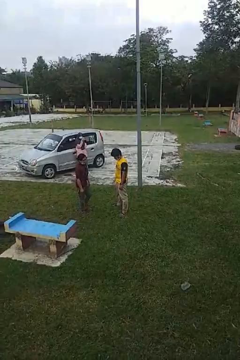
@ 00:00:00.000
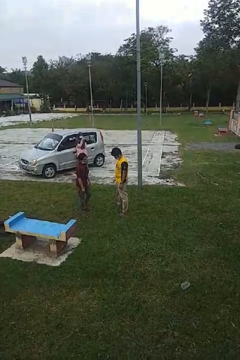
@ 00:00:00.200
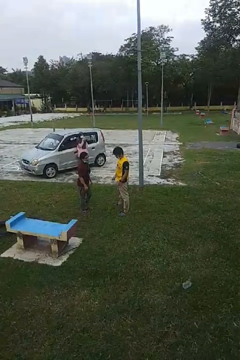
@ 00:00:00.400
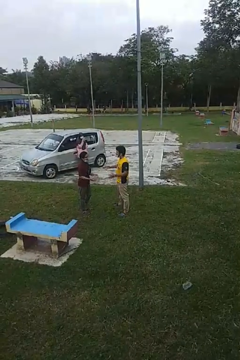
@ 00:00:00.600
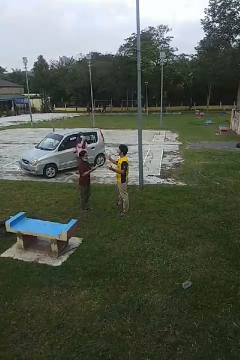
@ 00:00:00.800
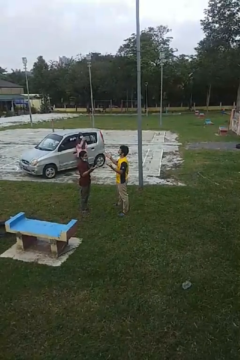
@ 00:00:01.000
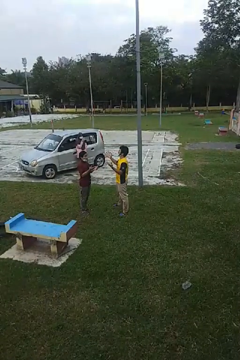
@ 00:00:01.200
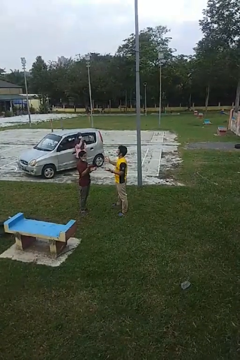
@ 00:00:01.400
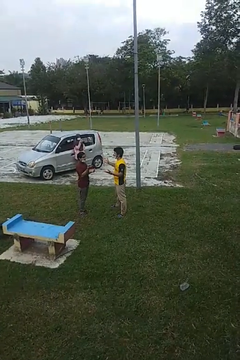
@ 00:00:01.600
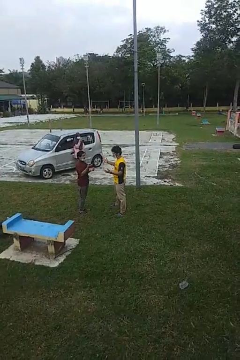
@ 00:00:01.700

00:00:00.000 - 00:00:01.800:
person talks to person

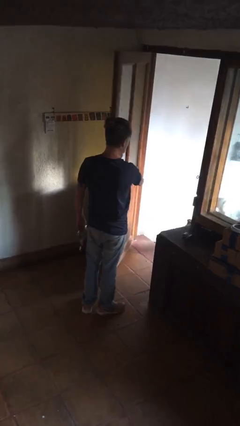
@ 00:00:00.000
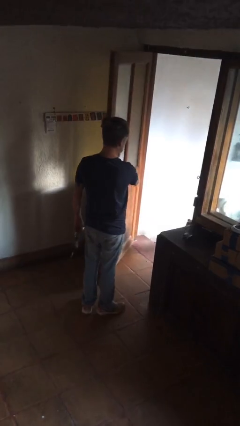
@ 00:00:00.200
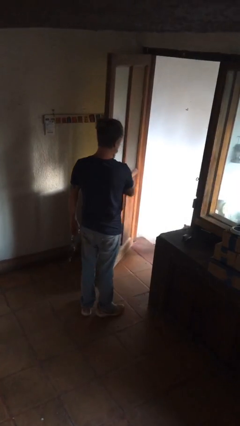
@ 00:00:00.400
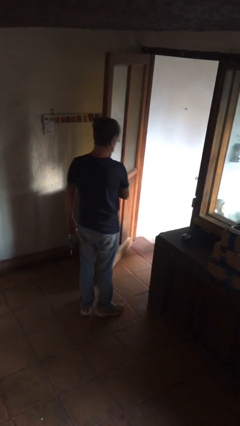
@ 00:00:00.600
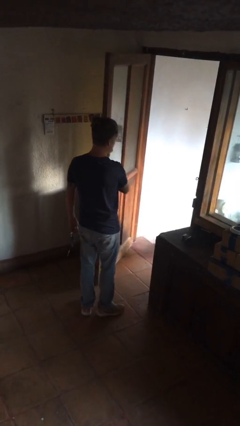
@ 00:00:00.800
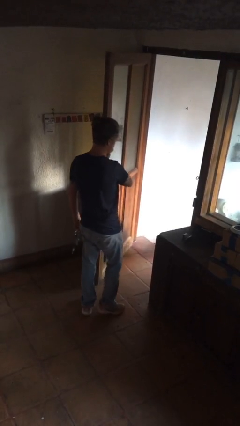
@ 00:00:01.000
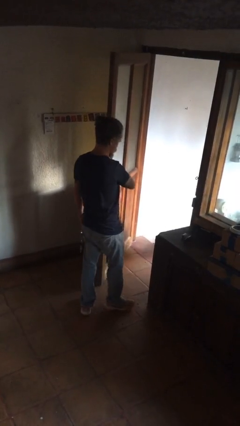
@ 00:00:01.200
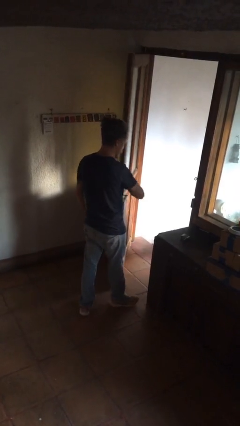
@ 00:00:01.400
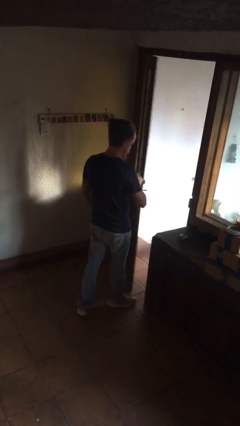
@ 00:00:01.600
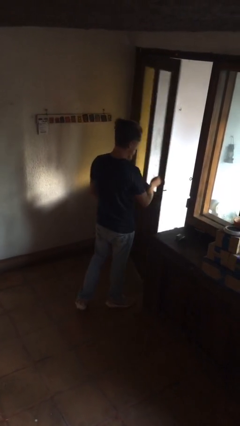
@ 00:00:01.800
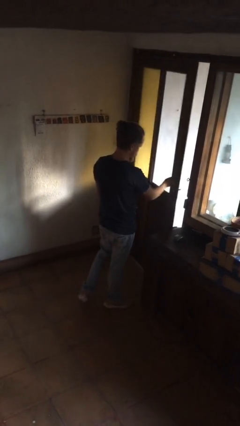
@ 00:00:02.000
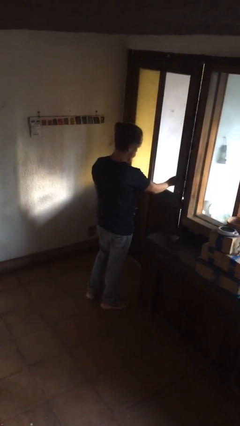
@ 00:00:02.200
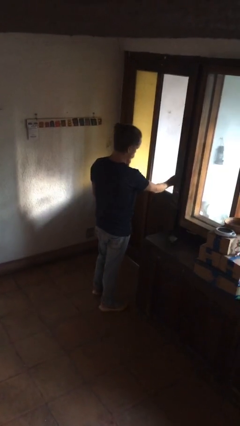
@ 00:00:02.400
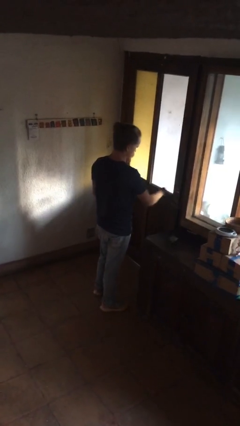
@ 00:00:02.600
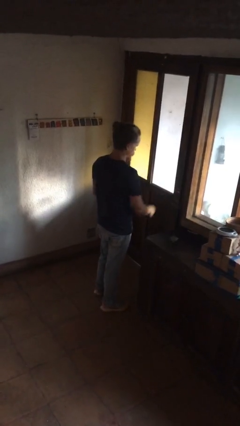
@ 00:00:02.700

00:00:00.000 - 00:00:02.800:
person closes facility door

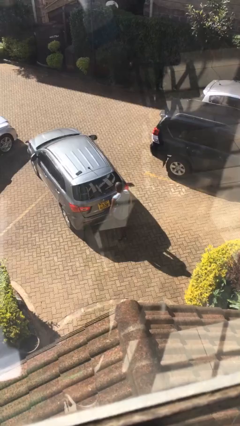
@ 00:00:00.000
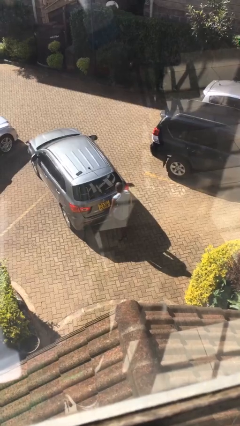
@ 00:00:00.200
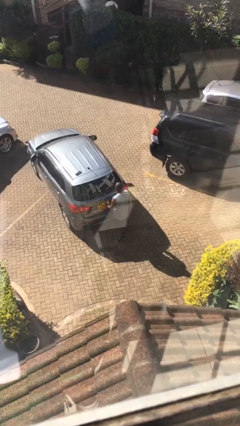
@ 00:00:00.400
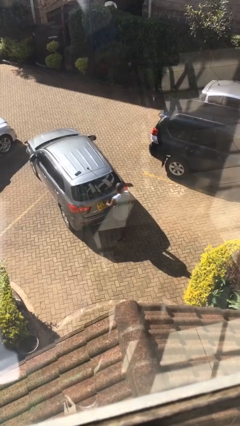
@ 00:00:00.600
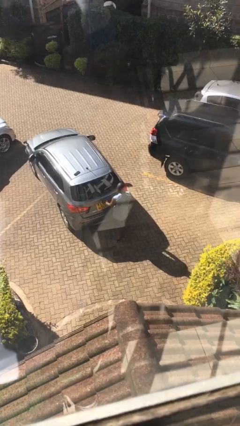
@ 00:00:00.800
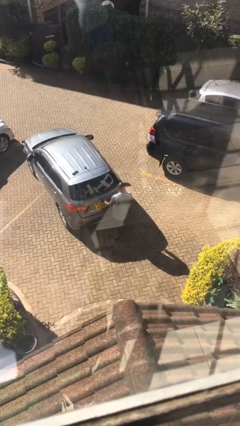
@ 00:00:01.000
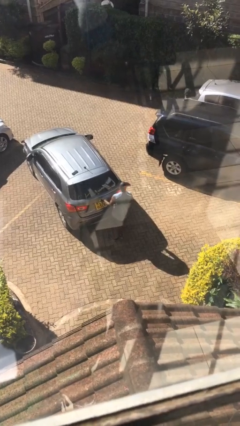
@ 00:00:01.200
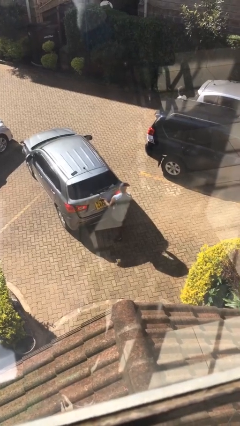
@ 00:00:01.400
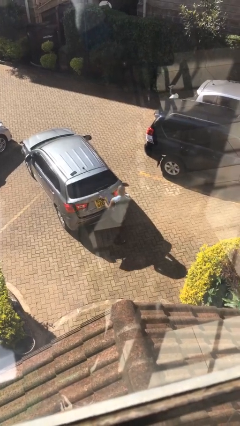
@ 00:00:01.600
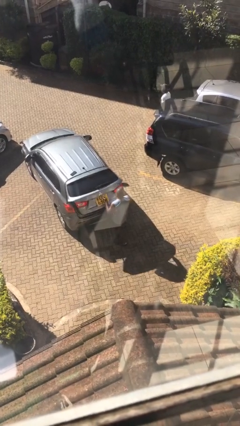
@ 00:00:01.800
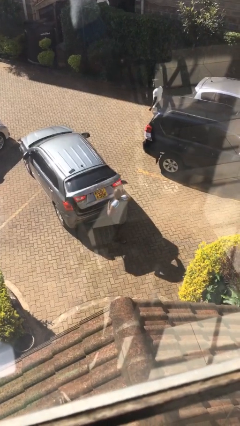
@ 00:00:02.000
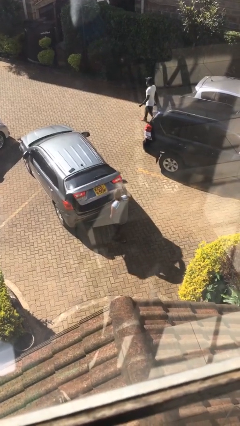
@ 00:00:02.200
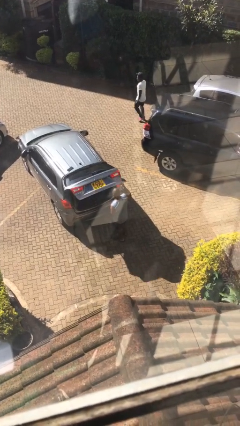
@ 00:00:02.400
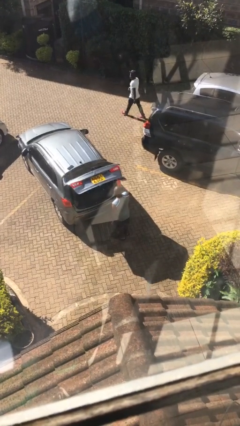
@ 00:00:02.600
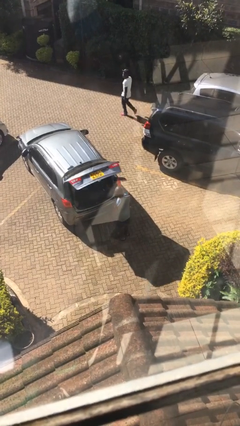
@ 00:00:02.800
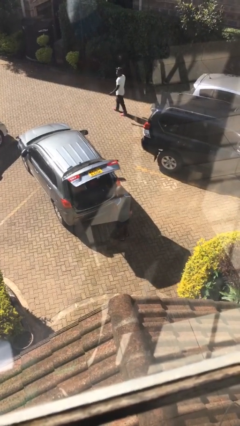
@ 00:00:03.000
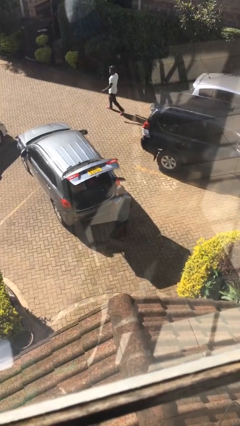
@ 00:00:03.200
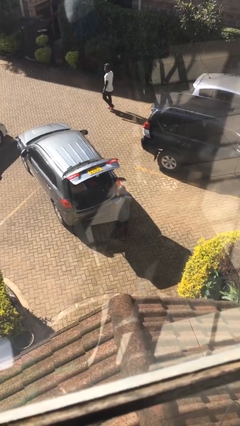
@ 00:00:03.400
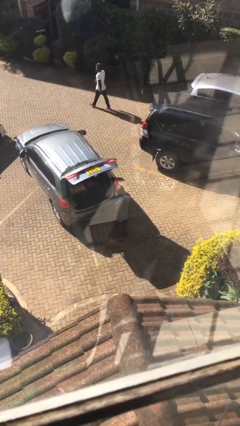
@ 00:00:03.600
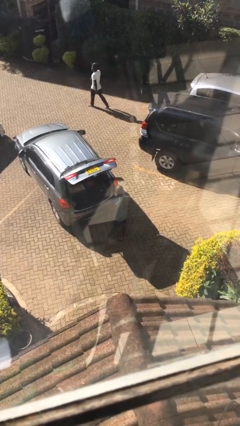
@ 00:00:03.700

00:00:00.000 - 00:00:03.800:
person opens car trunk

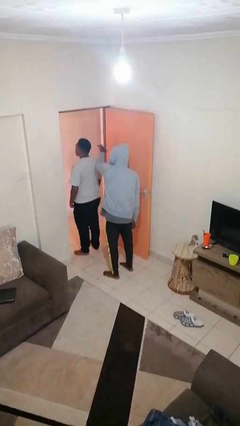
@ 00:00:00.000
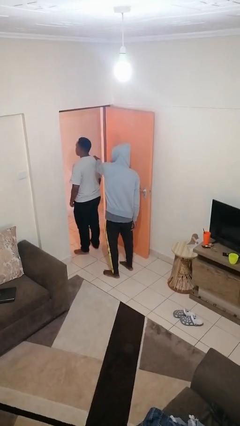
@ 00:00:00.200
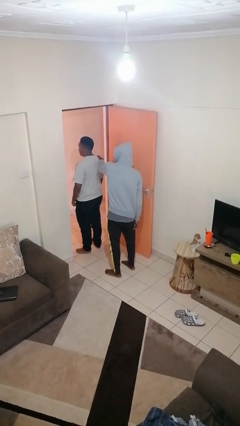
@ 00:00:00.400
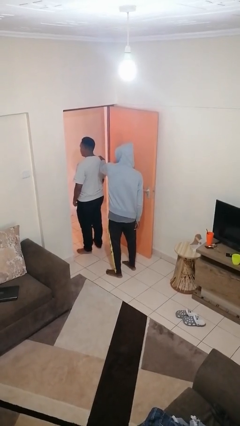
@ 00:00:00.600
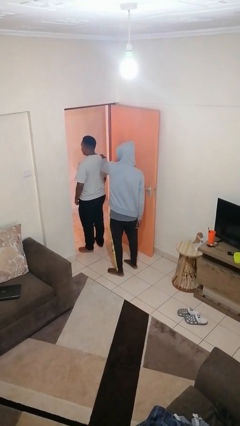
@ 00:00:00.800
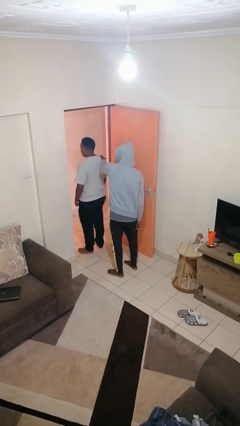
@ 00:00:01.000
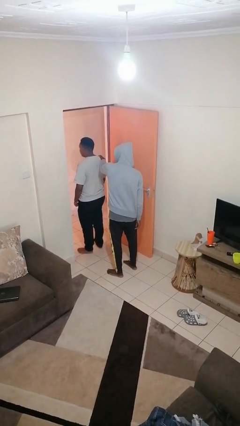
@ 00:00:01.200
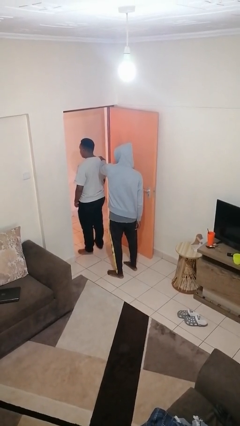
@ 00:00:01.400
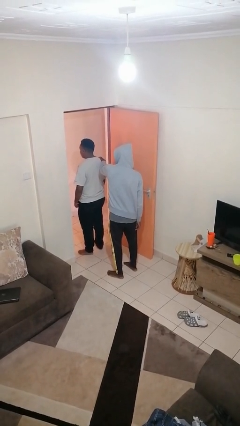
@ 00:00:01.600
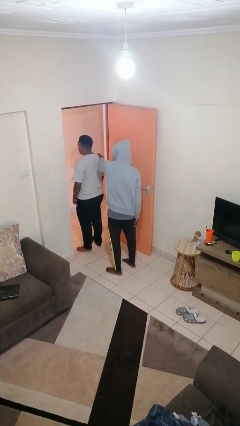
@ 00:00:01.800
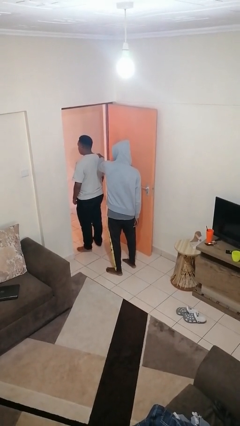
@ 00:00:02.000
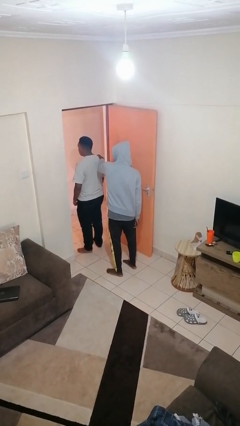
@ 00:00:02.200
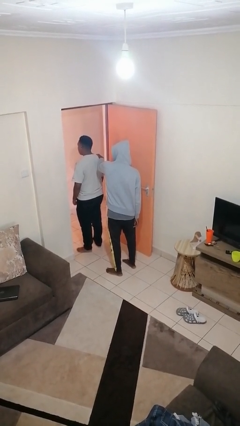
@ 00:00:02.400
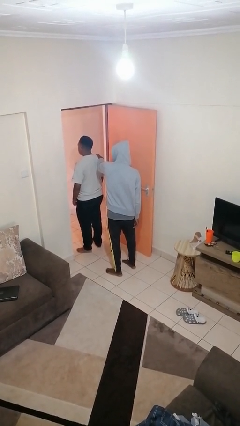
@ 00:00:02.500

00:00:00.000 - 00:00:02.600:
person grabs person by shoulder

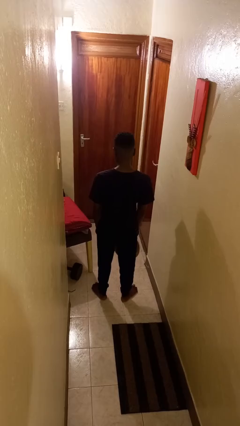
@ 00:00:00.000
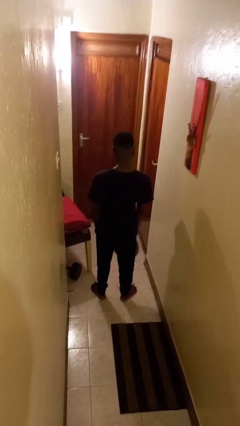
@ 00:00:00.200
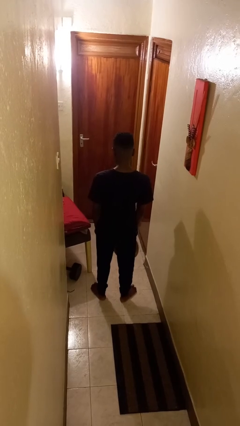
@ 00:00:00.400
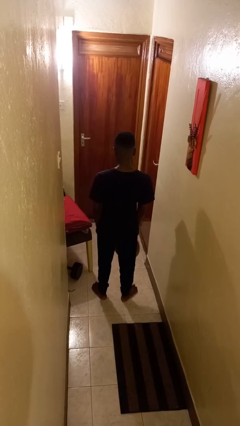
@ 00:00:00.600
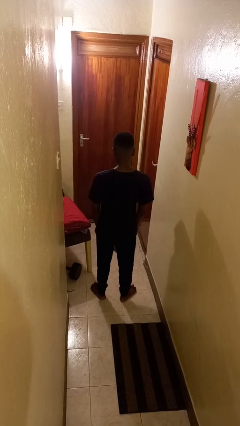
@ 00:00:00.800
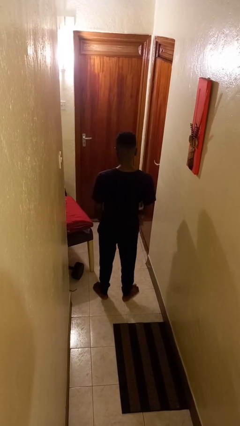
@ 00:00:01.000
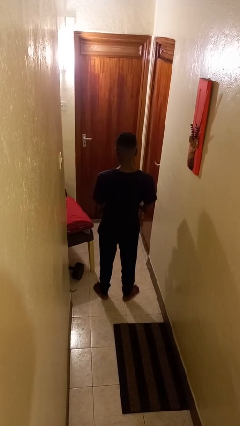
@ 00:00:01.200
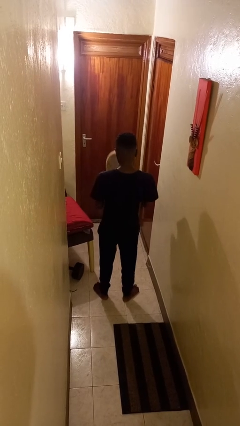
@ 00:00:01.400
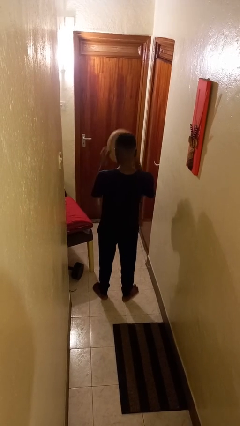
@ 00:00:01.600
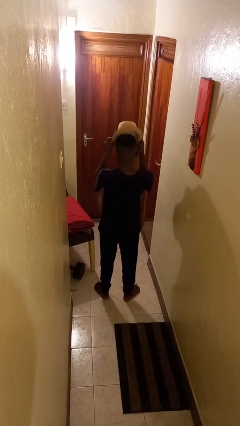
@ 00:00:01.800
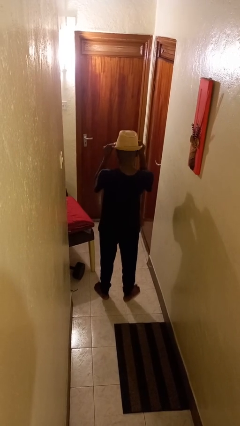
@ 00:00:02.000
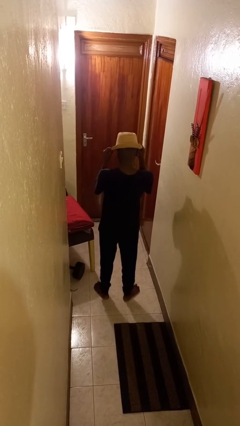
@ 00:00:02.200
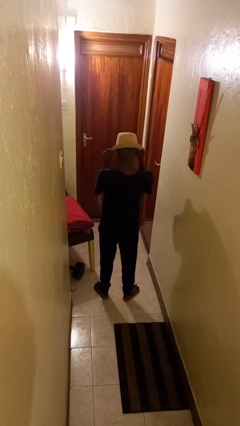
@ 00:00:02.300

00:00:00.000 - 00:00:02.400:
person puts on hat

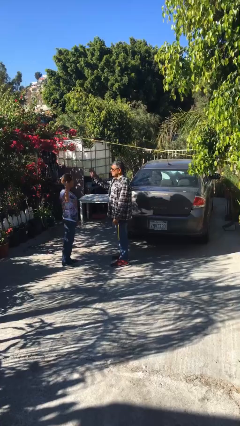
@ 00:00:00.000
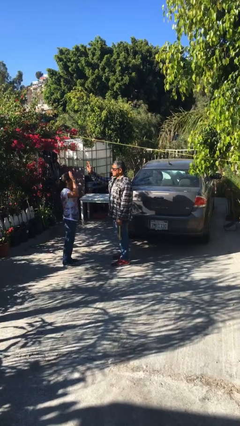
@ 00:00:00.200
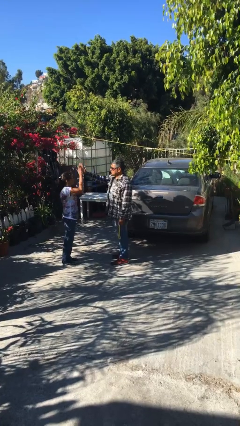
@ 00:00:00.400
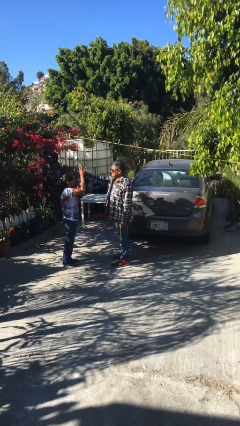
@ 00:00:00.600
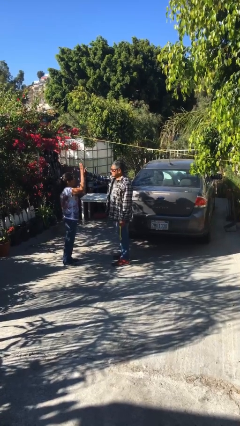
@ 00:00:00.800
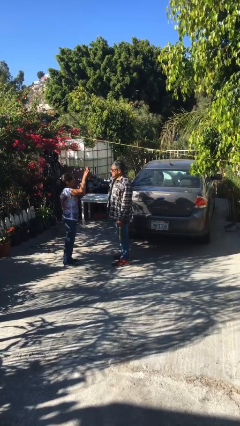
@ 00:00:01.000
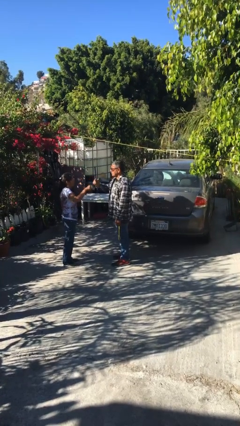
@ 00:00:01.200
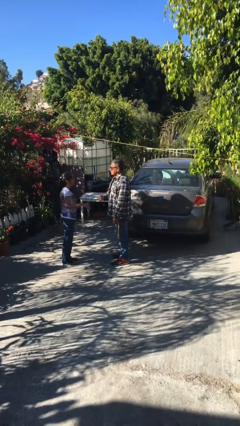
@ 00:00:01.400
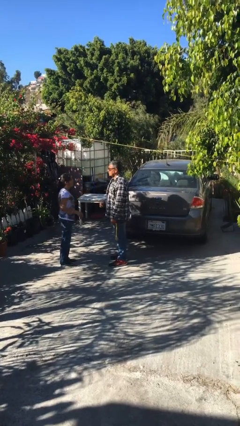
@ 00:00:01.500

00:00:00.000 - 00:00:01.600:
person highfives hand

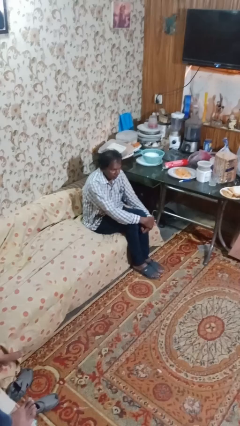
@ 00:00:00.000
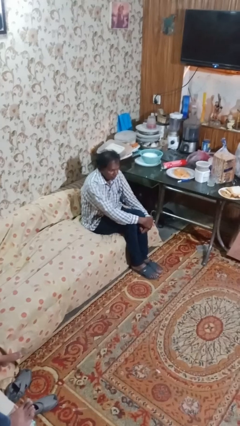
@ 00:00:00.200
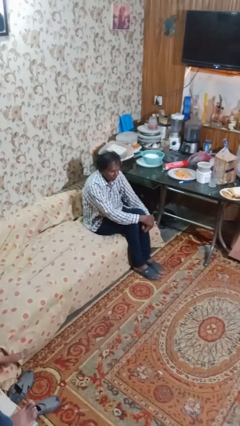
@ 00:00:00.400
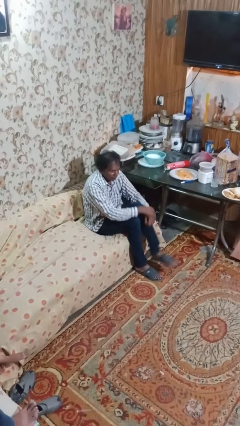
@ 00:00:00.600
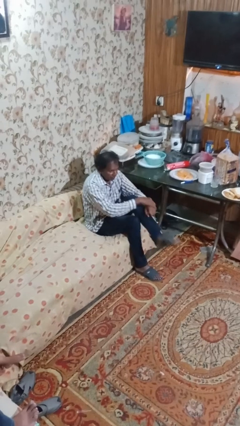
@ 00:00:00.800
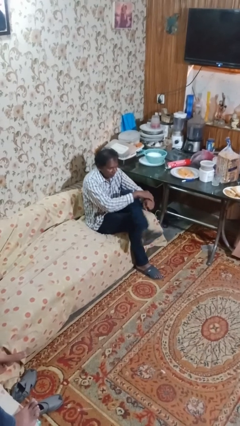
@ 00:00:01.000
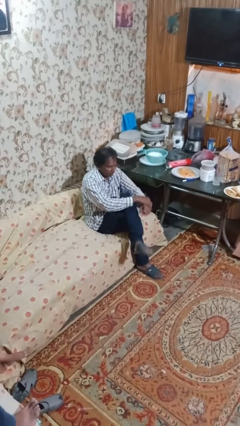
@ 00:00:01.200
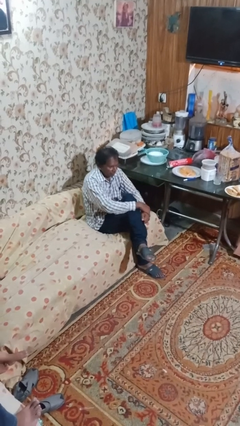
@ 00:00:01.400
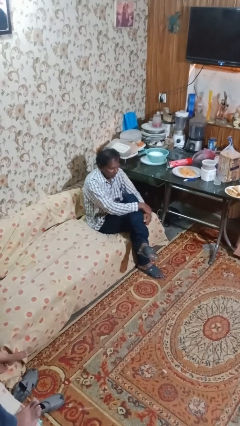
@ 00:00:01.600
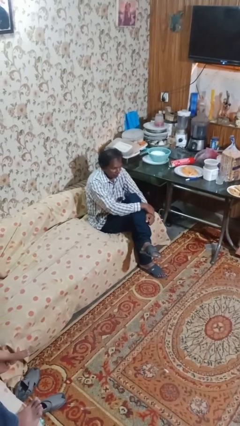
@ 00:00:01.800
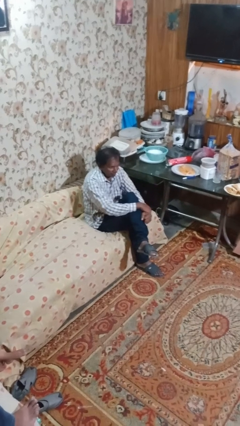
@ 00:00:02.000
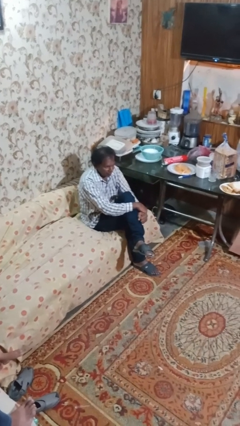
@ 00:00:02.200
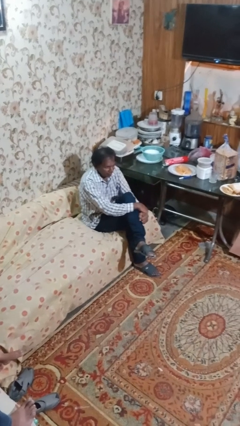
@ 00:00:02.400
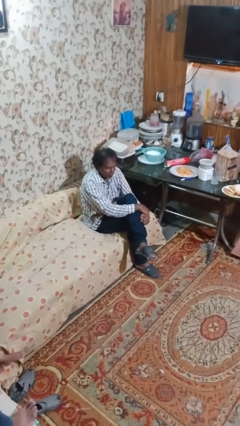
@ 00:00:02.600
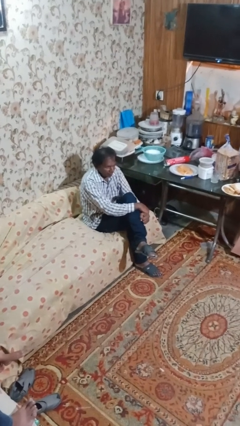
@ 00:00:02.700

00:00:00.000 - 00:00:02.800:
person crosses legs
